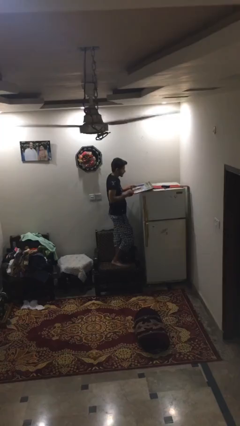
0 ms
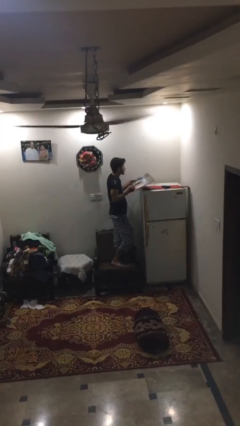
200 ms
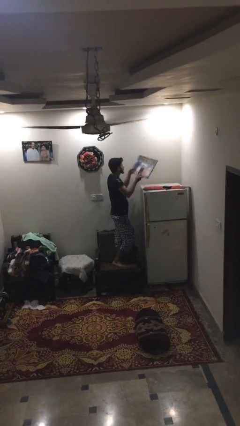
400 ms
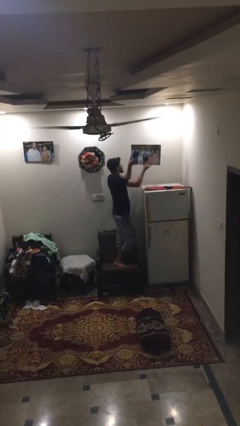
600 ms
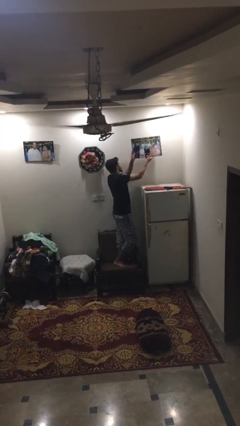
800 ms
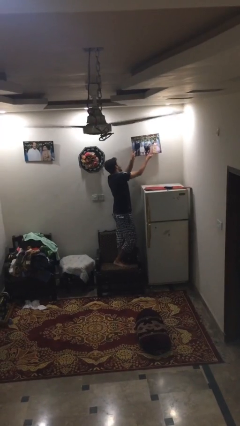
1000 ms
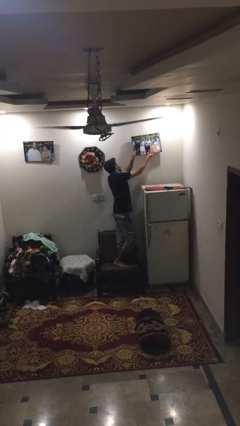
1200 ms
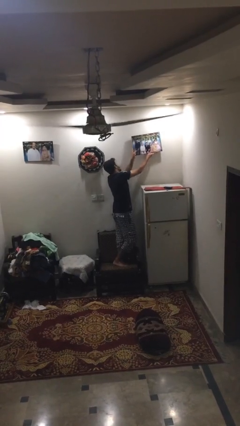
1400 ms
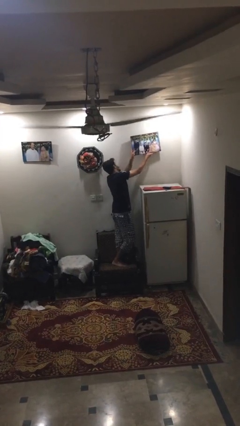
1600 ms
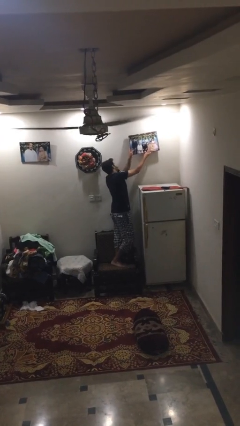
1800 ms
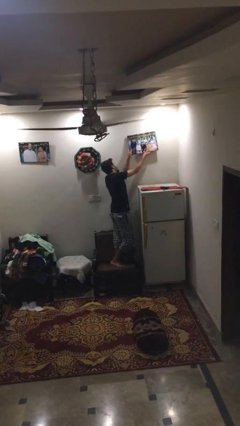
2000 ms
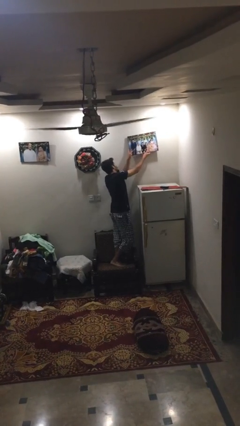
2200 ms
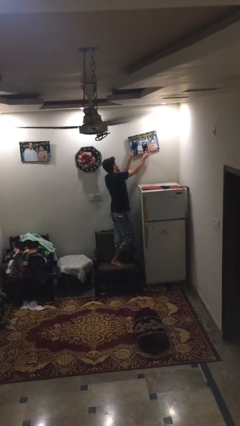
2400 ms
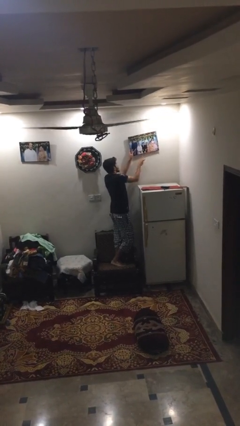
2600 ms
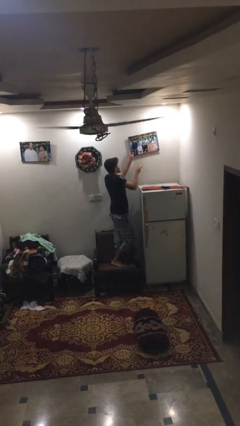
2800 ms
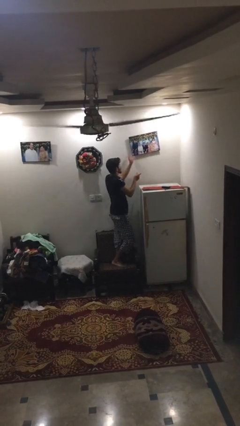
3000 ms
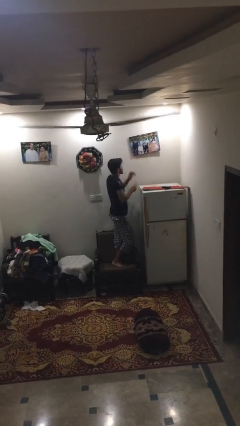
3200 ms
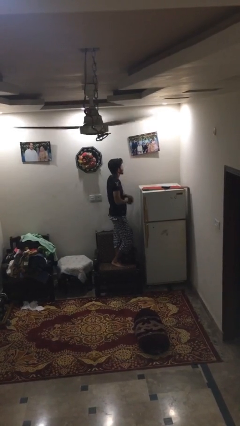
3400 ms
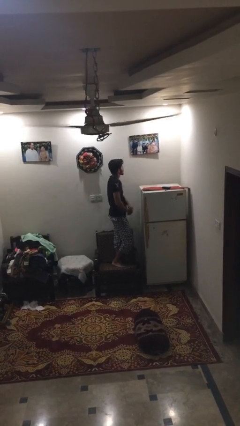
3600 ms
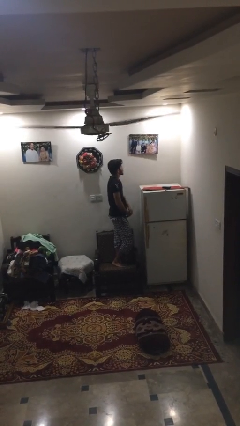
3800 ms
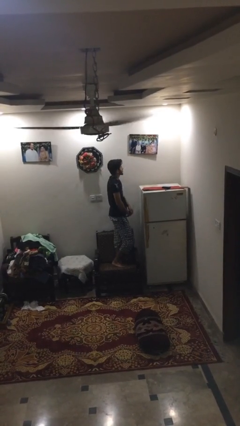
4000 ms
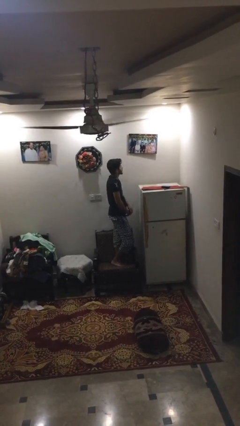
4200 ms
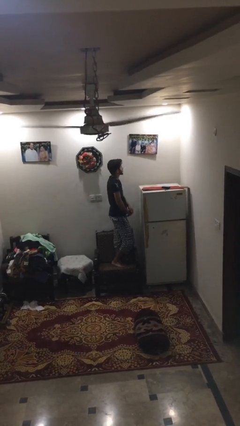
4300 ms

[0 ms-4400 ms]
person puts up picture frame

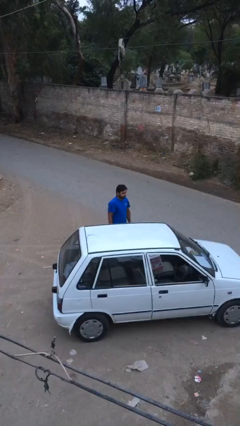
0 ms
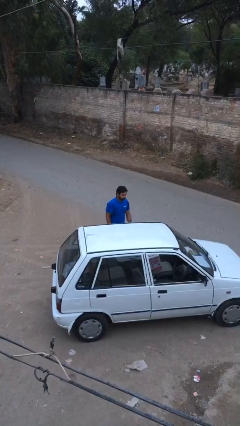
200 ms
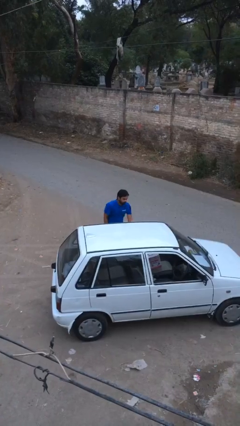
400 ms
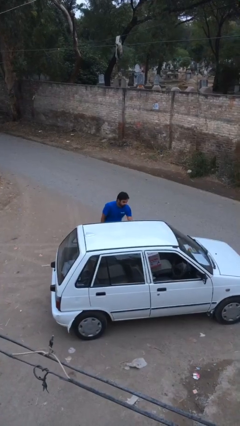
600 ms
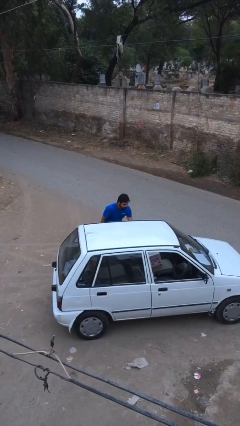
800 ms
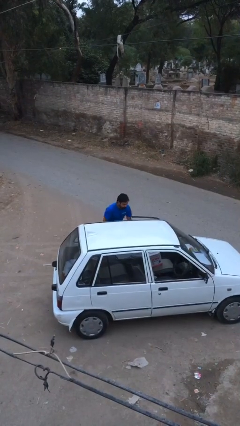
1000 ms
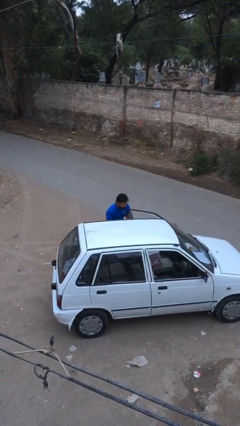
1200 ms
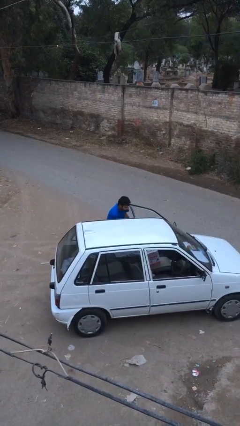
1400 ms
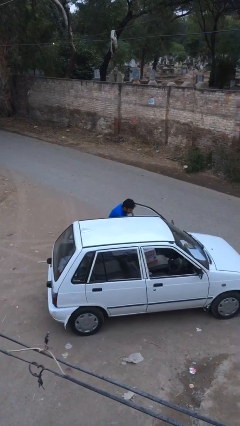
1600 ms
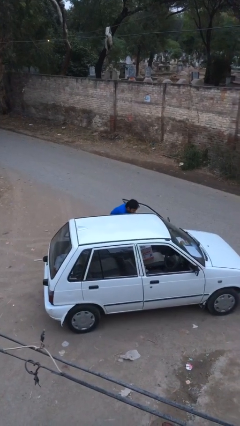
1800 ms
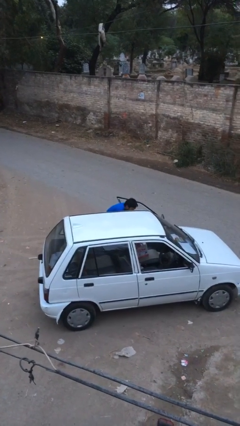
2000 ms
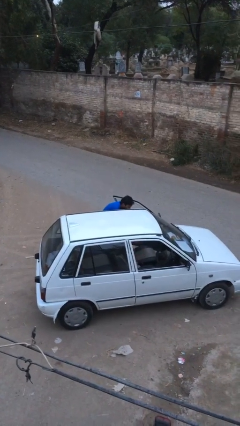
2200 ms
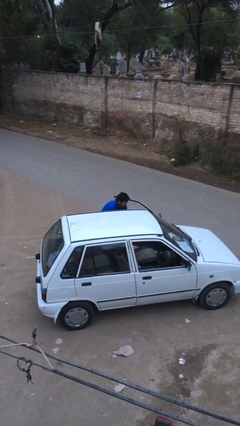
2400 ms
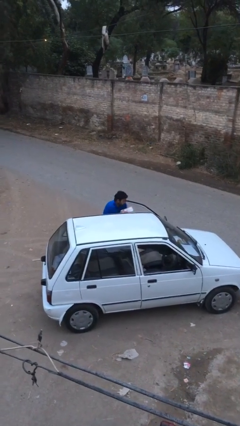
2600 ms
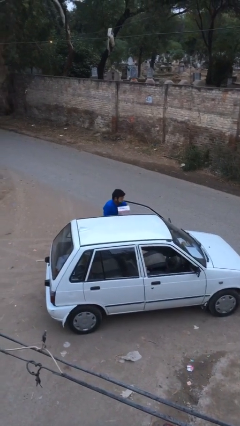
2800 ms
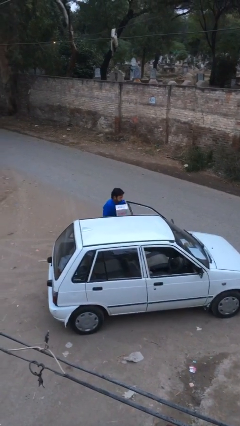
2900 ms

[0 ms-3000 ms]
person unloads car

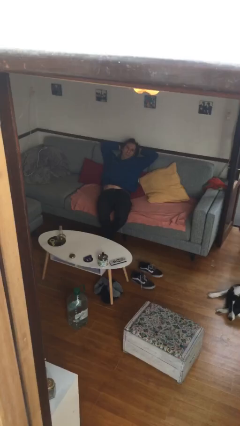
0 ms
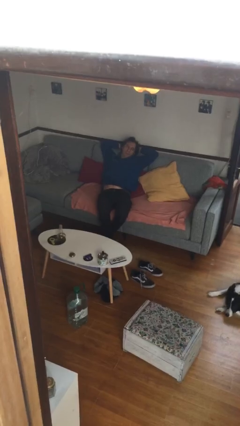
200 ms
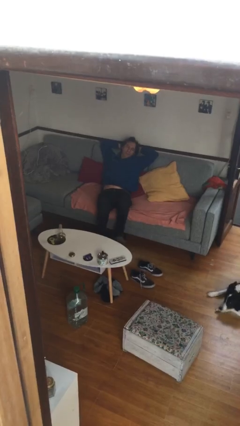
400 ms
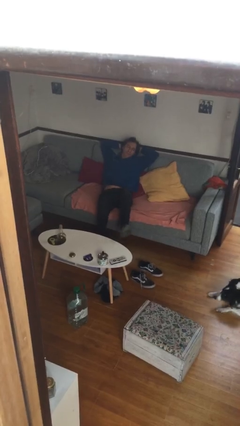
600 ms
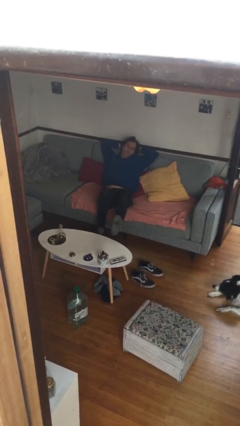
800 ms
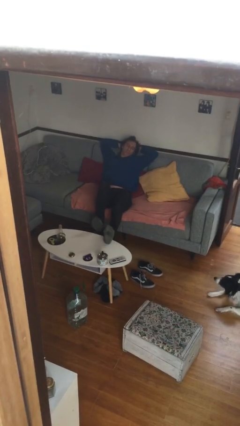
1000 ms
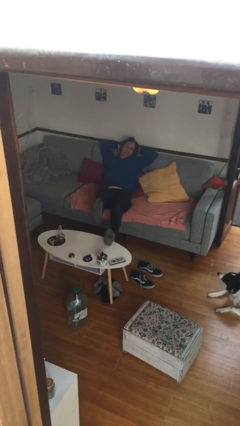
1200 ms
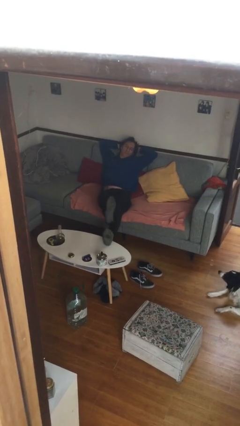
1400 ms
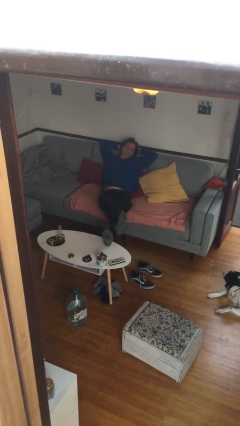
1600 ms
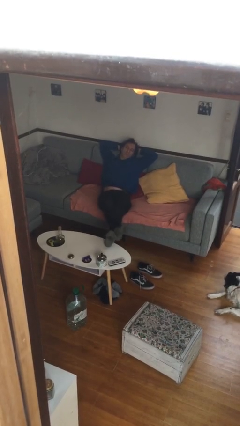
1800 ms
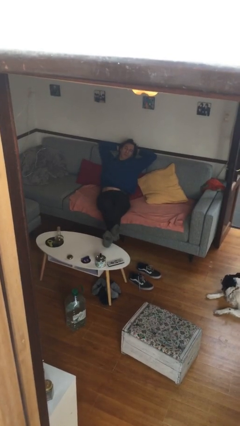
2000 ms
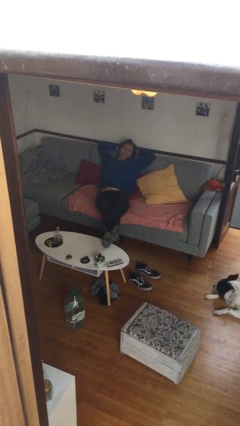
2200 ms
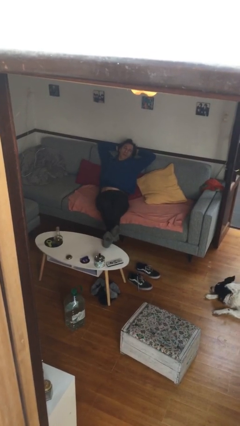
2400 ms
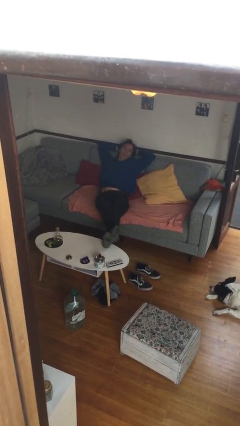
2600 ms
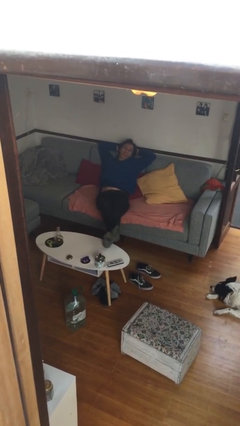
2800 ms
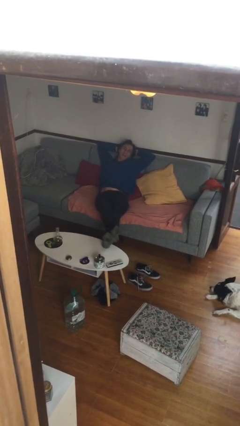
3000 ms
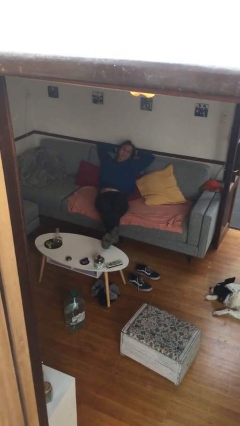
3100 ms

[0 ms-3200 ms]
person puts feet up

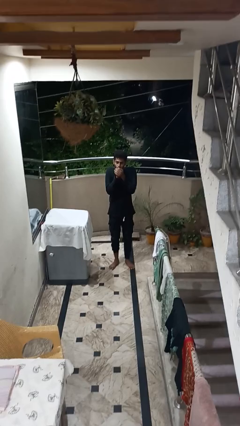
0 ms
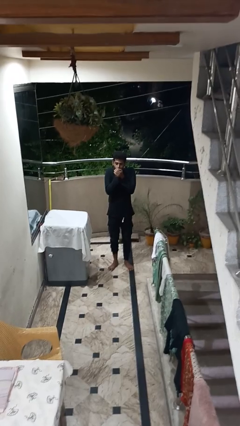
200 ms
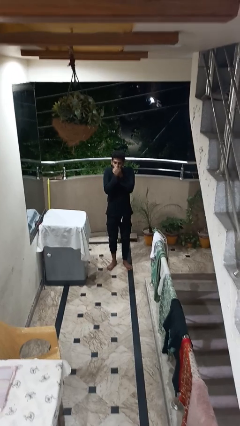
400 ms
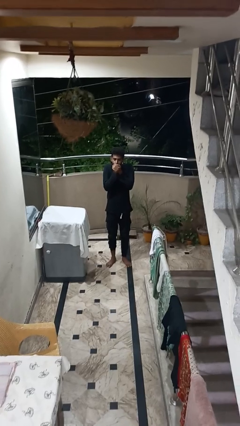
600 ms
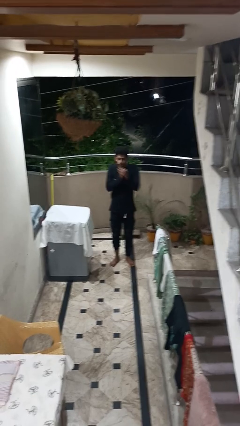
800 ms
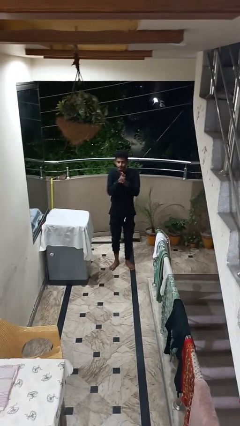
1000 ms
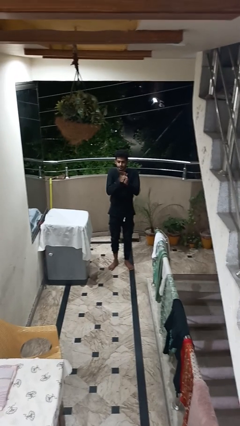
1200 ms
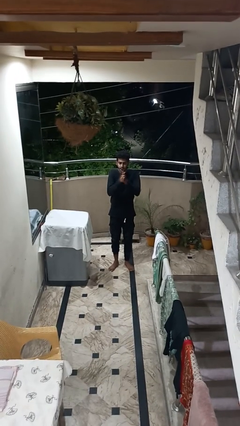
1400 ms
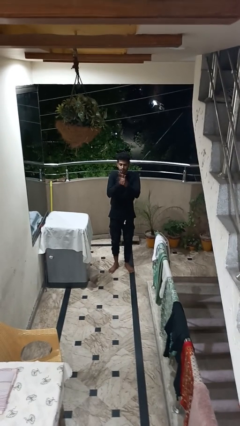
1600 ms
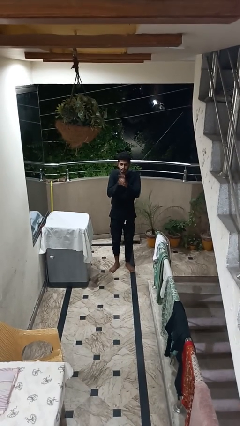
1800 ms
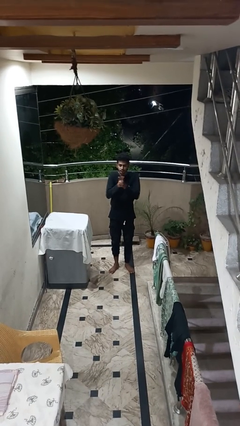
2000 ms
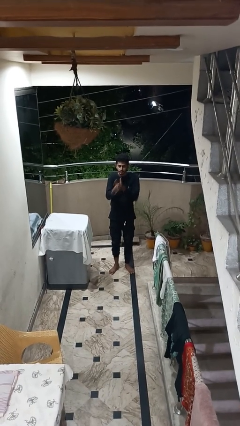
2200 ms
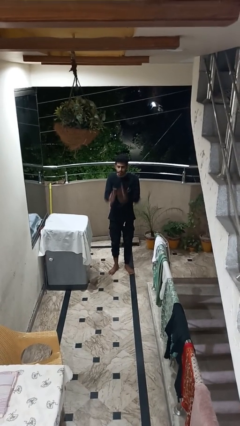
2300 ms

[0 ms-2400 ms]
person blows into hands

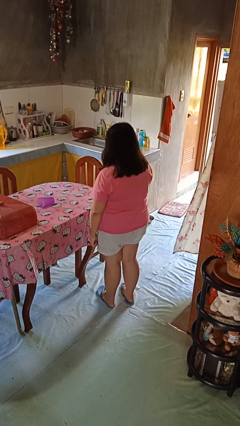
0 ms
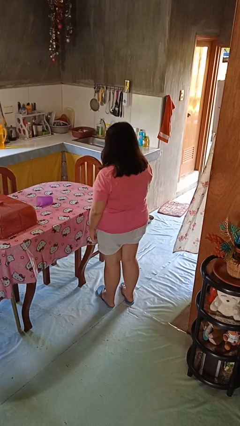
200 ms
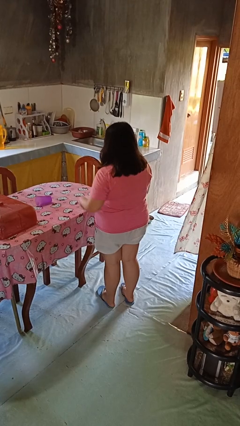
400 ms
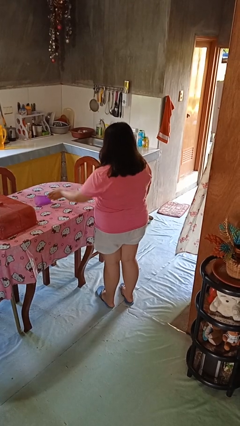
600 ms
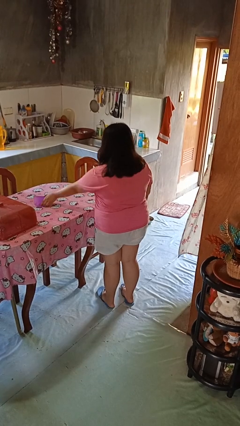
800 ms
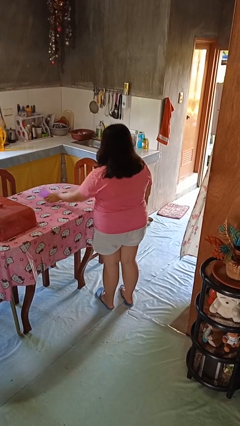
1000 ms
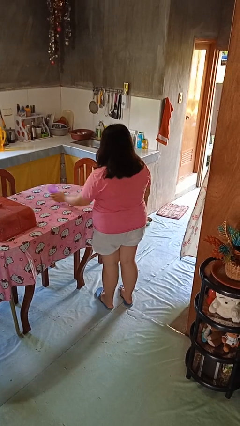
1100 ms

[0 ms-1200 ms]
person sets upright glass

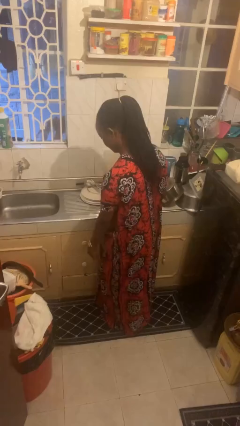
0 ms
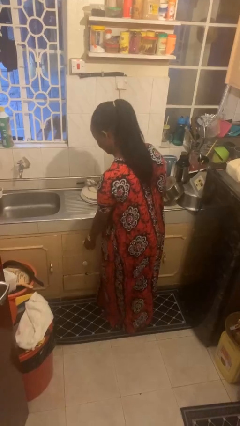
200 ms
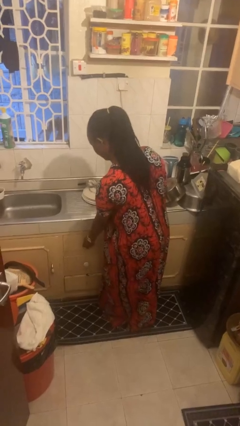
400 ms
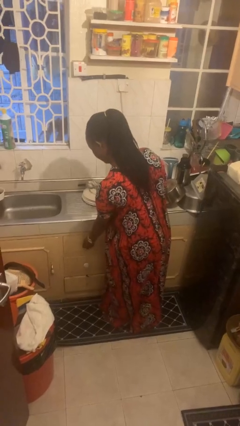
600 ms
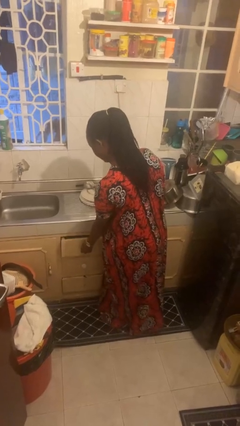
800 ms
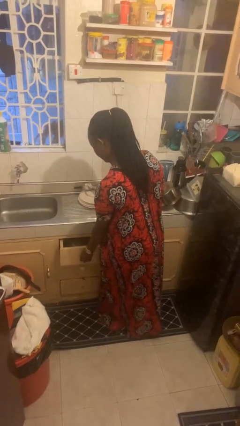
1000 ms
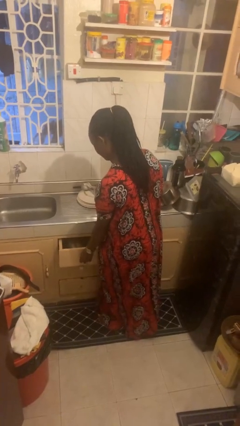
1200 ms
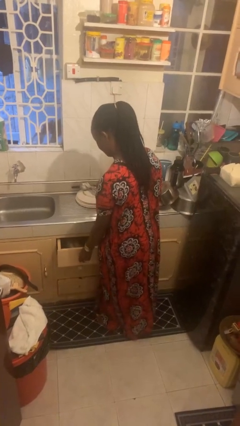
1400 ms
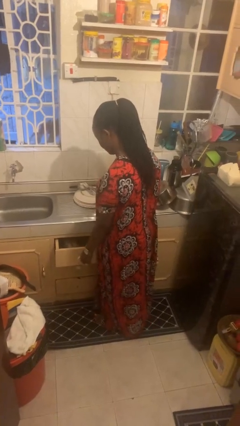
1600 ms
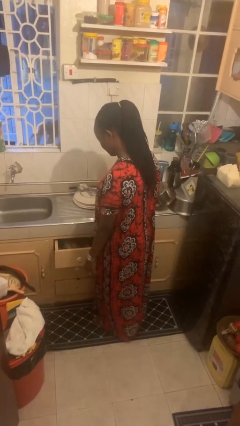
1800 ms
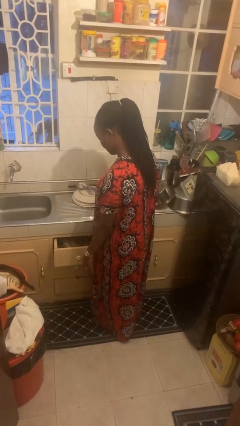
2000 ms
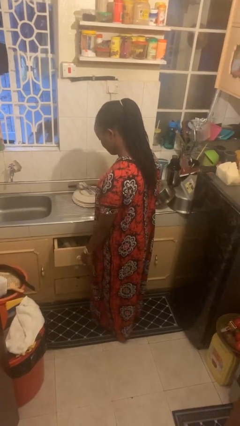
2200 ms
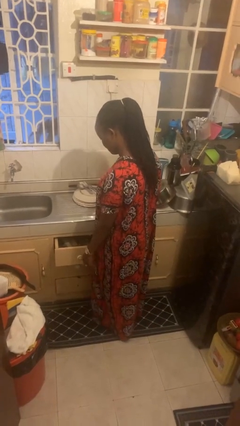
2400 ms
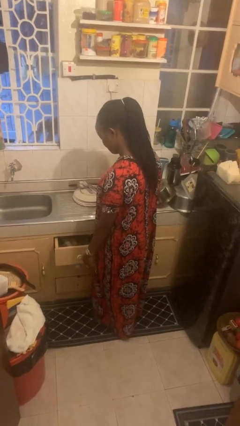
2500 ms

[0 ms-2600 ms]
person opens kitchen drawer

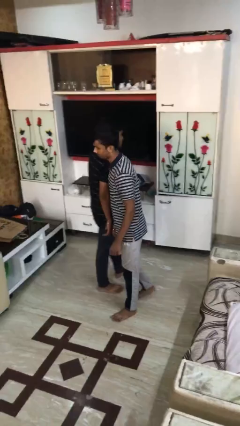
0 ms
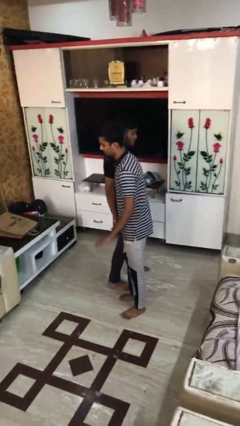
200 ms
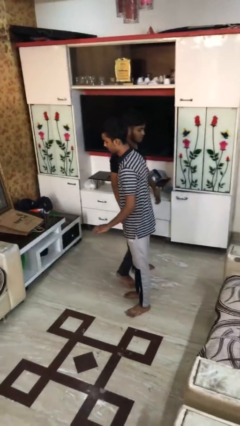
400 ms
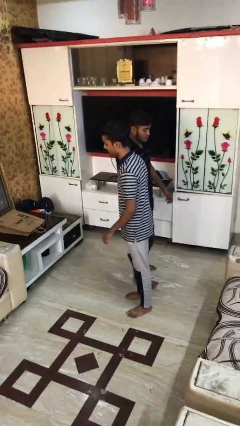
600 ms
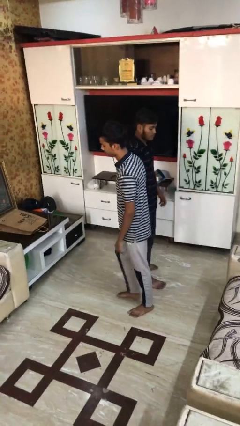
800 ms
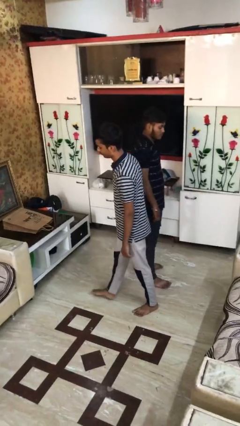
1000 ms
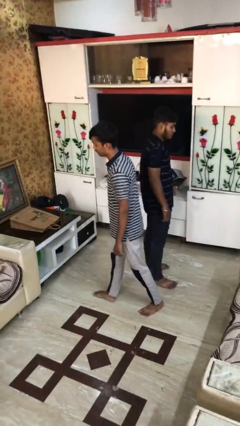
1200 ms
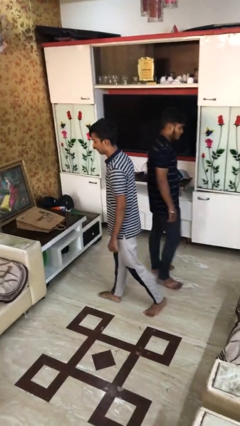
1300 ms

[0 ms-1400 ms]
person bumps into person
